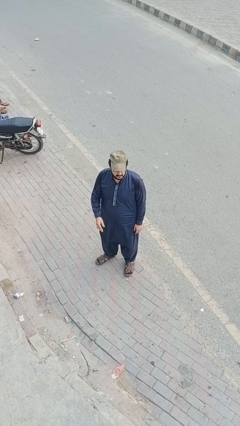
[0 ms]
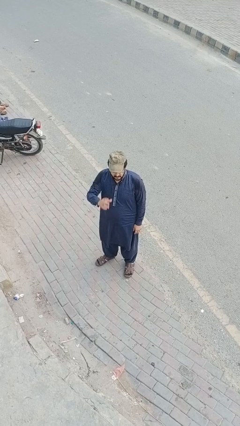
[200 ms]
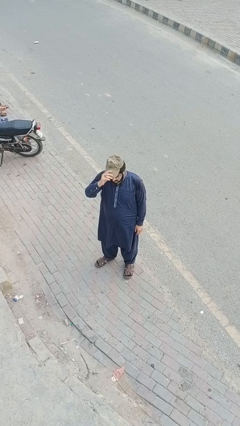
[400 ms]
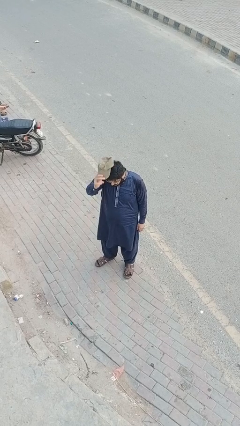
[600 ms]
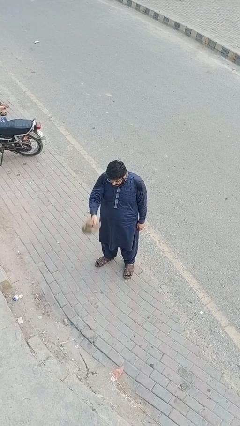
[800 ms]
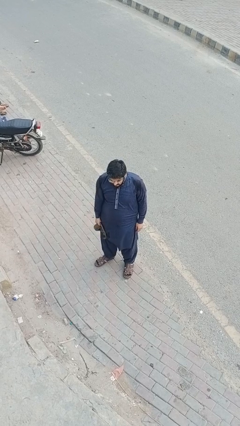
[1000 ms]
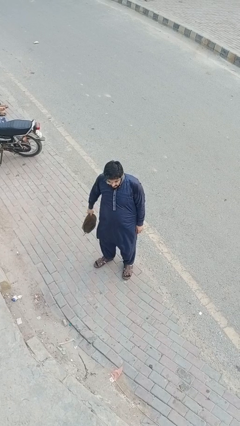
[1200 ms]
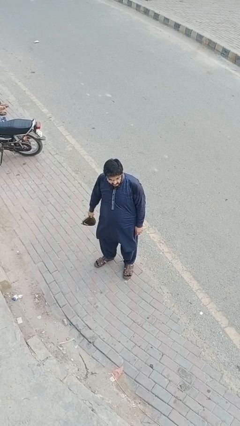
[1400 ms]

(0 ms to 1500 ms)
person takes off hat

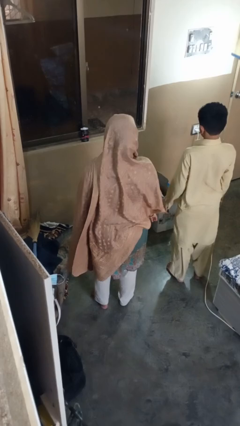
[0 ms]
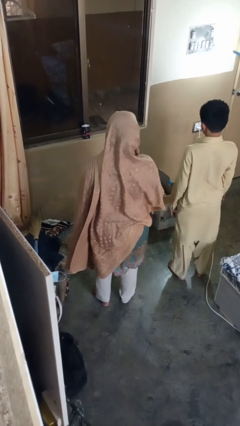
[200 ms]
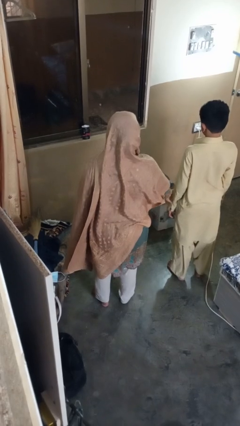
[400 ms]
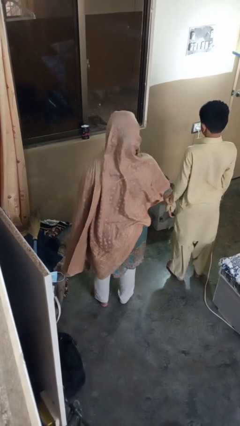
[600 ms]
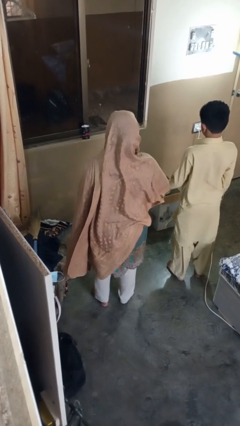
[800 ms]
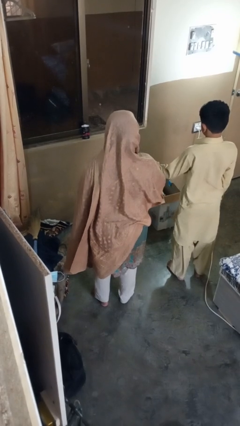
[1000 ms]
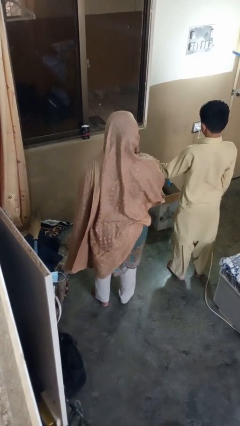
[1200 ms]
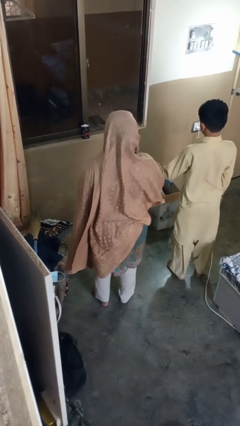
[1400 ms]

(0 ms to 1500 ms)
person grabs person by forearm

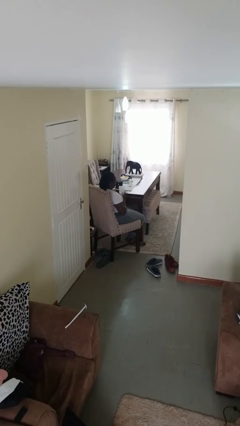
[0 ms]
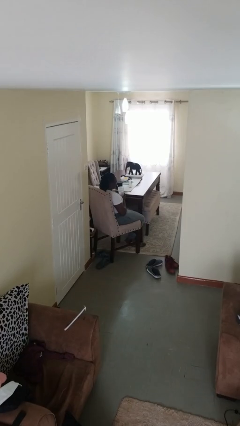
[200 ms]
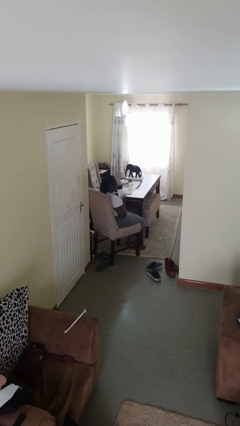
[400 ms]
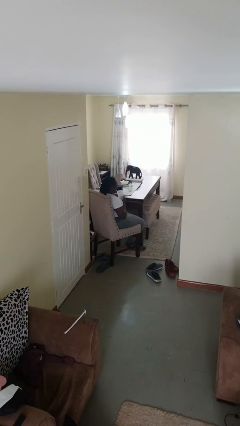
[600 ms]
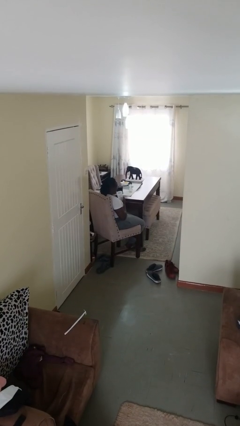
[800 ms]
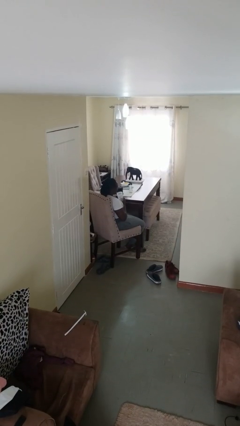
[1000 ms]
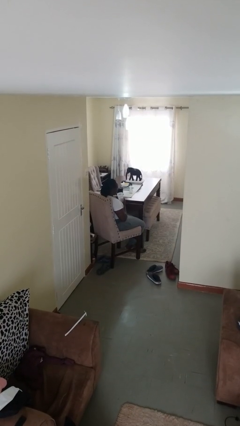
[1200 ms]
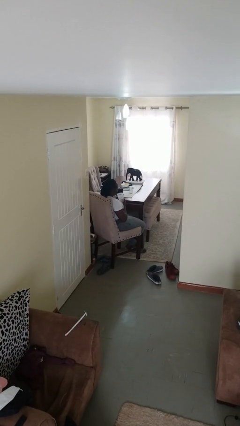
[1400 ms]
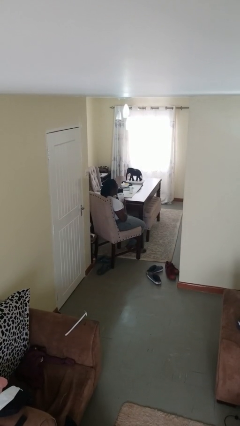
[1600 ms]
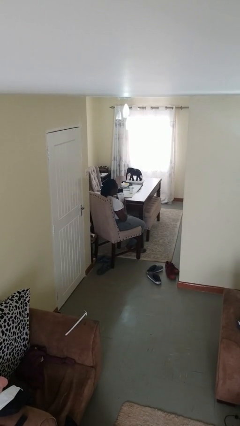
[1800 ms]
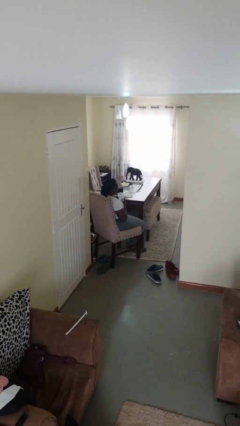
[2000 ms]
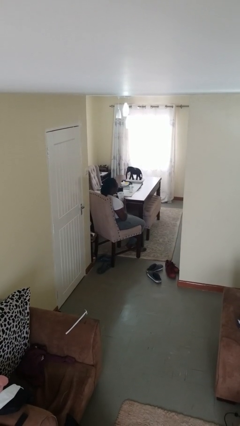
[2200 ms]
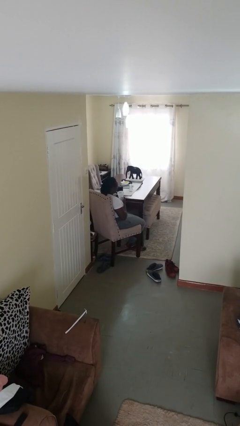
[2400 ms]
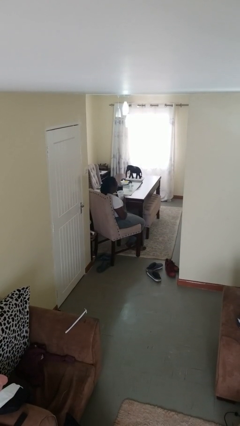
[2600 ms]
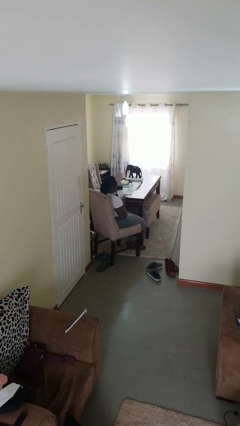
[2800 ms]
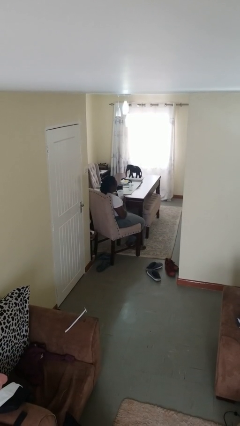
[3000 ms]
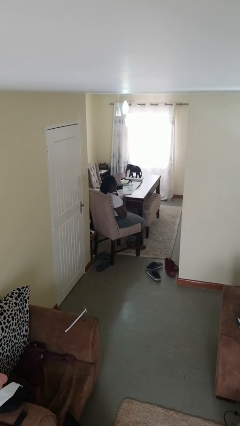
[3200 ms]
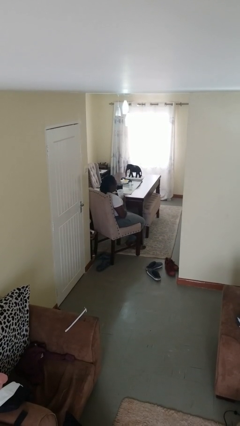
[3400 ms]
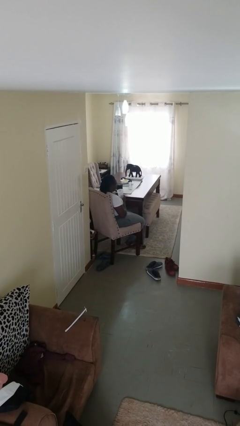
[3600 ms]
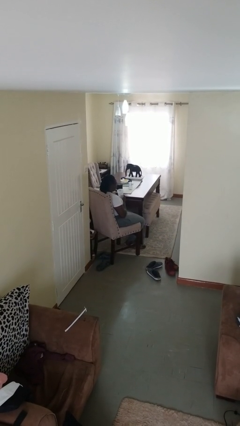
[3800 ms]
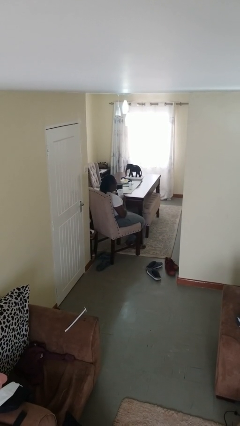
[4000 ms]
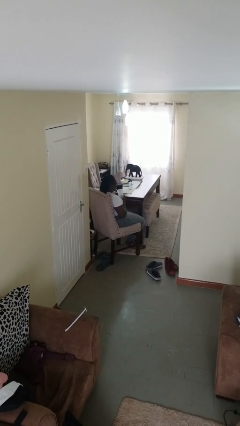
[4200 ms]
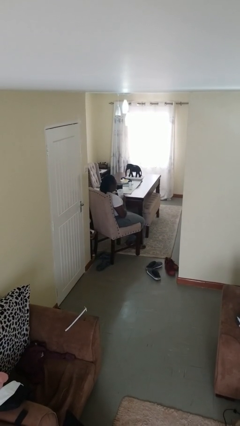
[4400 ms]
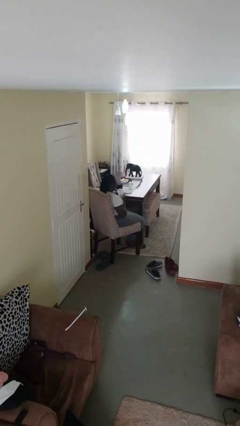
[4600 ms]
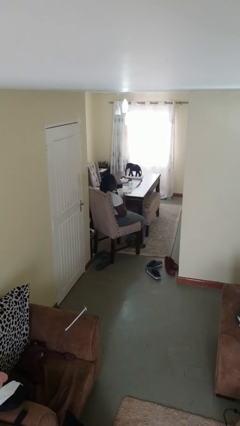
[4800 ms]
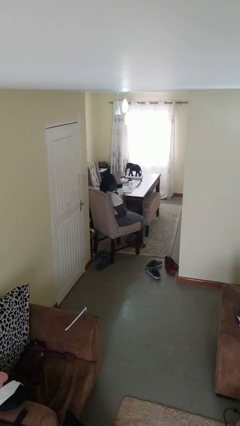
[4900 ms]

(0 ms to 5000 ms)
person drinks from straw

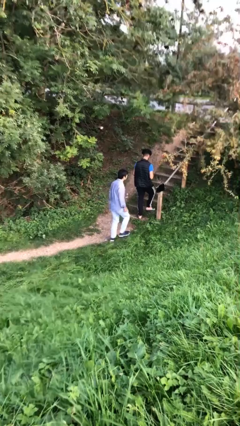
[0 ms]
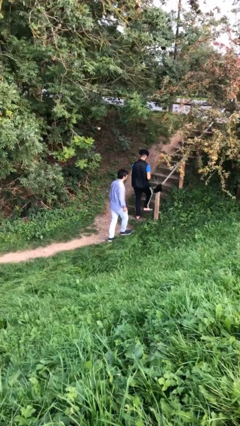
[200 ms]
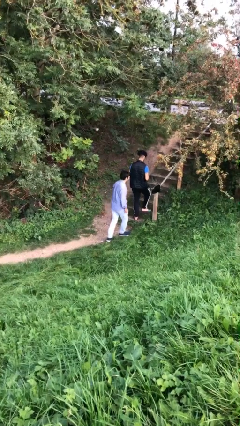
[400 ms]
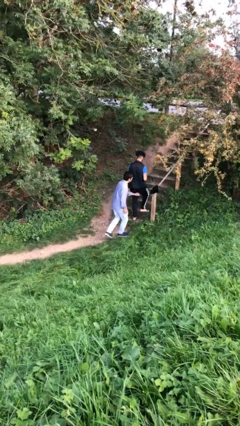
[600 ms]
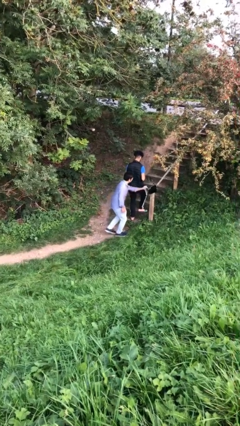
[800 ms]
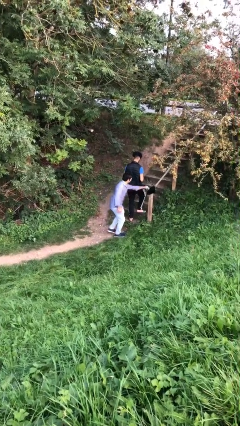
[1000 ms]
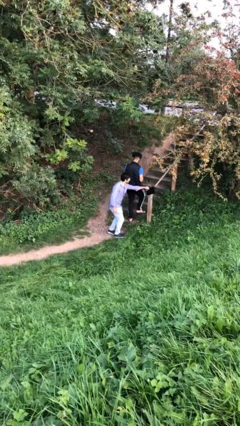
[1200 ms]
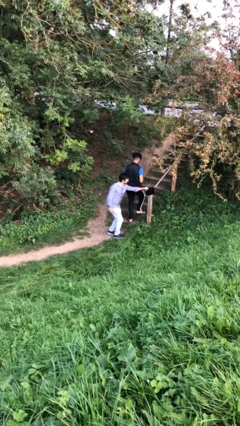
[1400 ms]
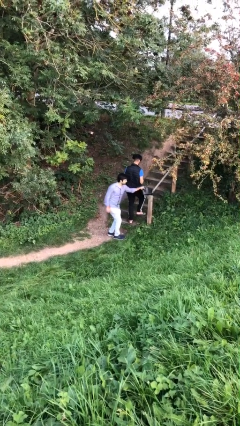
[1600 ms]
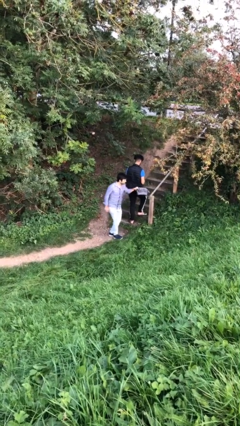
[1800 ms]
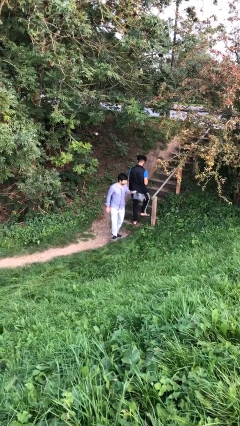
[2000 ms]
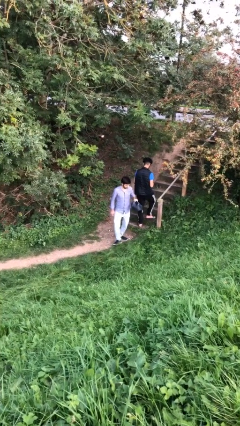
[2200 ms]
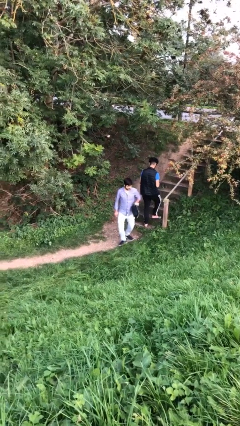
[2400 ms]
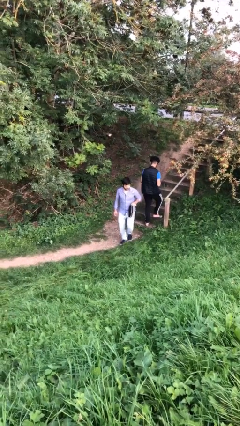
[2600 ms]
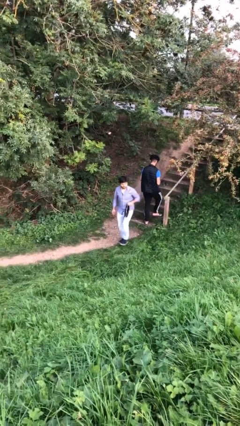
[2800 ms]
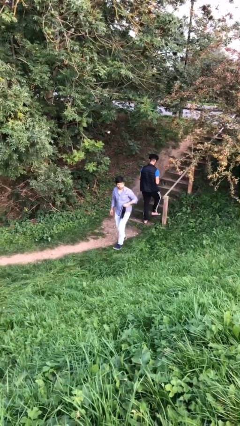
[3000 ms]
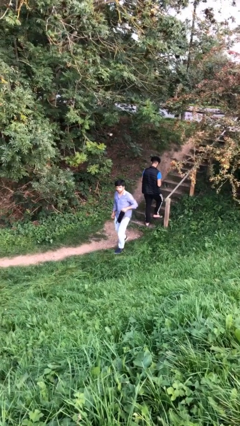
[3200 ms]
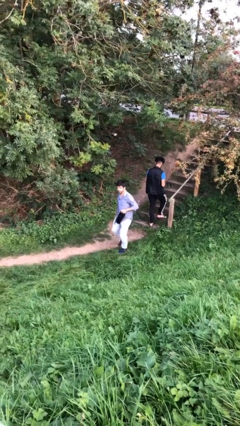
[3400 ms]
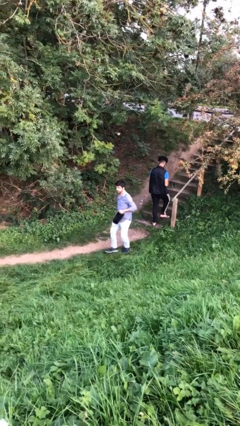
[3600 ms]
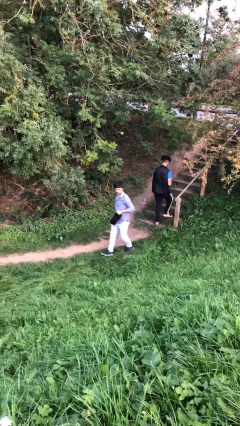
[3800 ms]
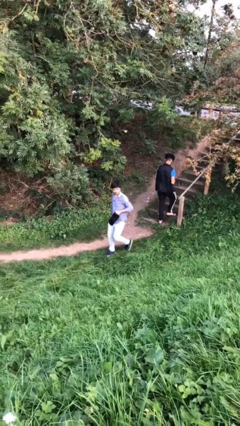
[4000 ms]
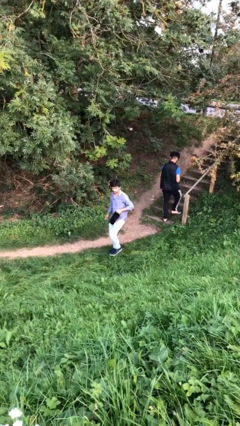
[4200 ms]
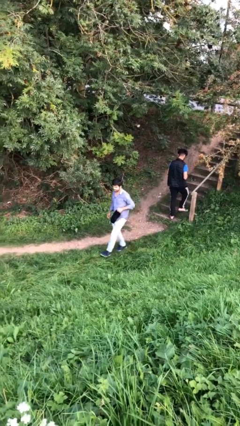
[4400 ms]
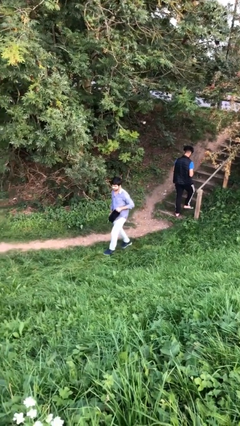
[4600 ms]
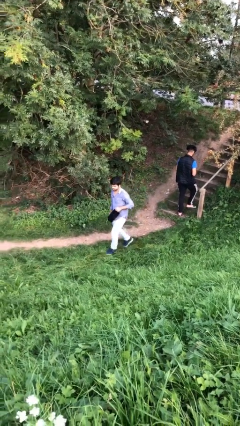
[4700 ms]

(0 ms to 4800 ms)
person steals object from person

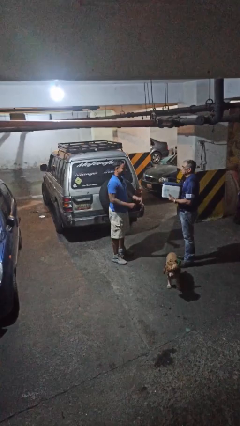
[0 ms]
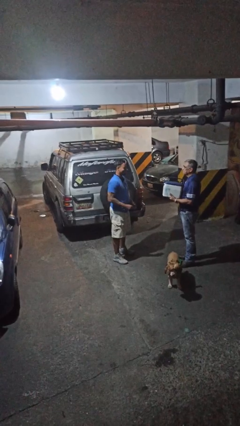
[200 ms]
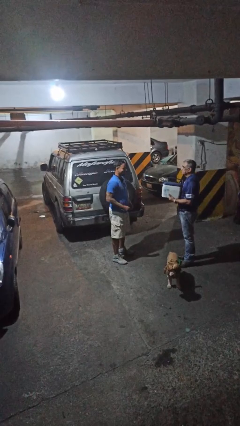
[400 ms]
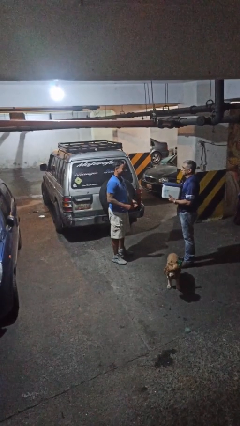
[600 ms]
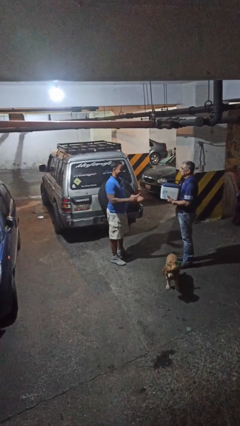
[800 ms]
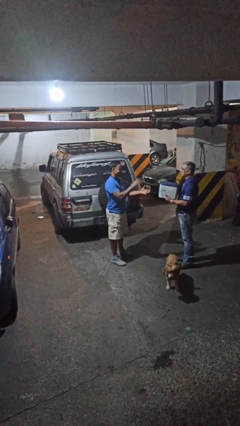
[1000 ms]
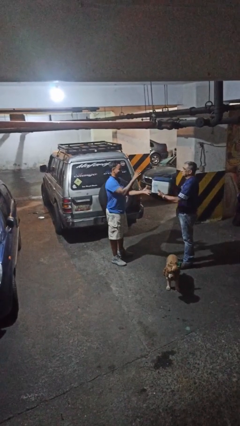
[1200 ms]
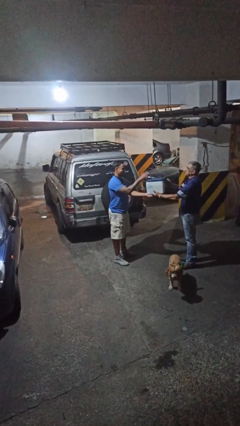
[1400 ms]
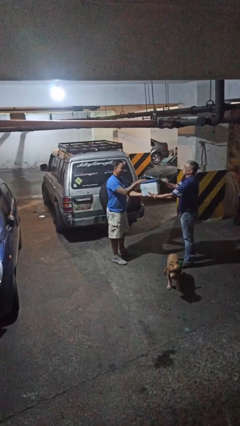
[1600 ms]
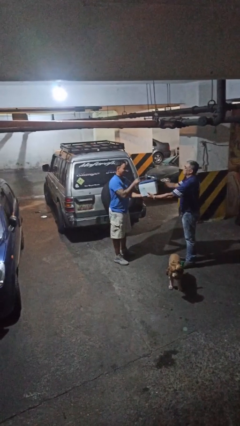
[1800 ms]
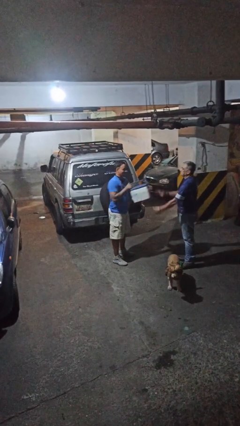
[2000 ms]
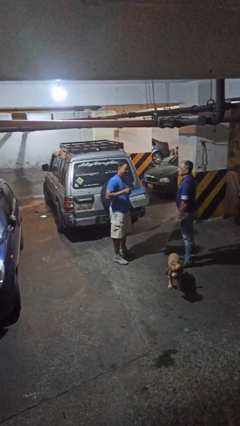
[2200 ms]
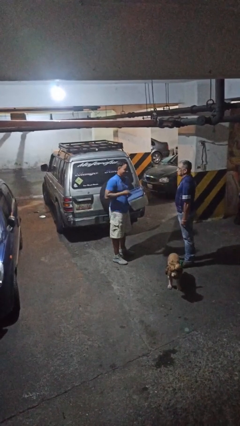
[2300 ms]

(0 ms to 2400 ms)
person transfers object to person

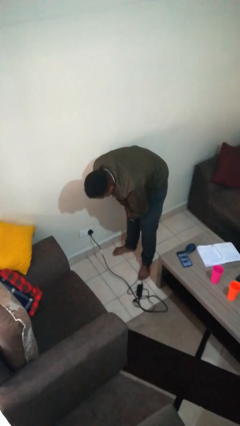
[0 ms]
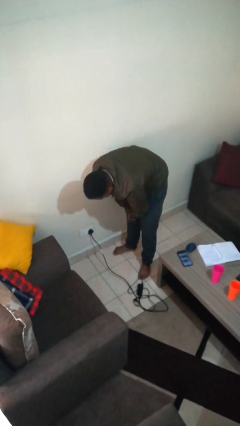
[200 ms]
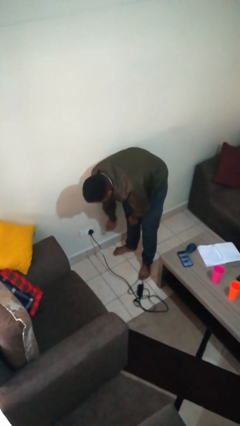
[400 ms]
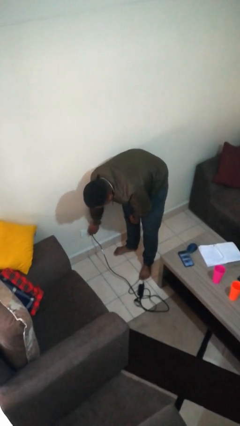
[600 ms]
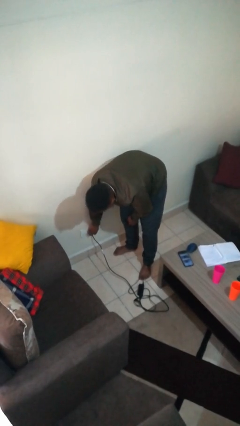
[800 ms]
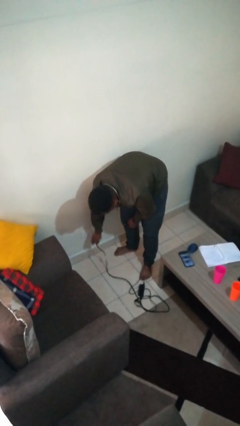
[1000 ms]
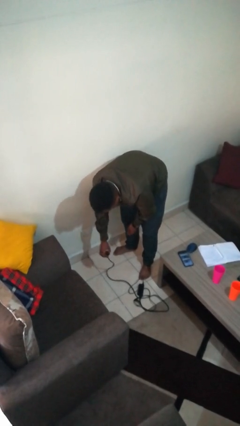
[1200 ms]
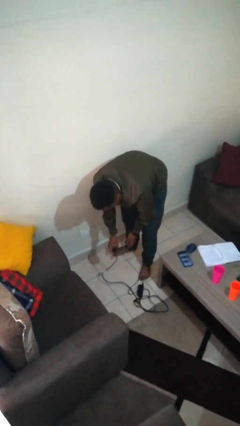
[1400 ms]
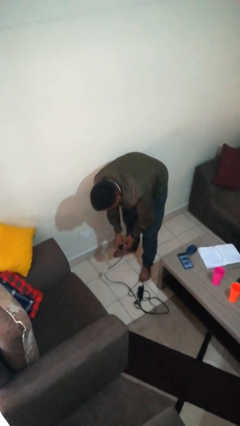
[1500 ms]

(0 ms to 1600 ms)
person unplugs from electrical socket

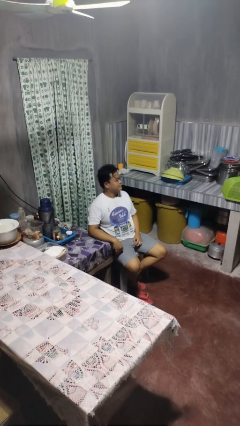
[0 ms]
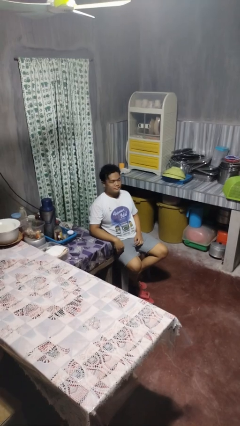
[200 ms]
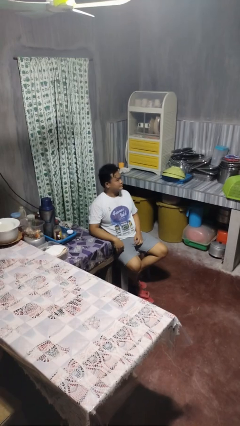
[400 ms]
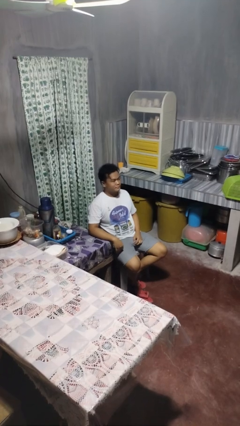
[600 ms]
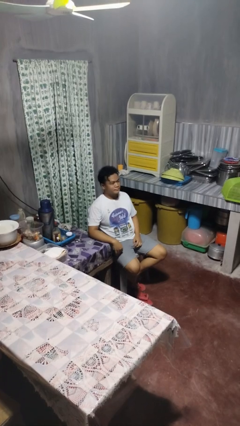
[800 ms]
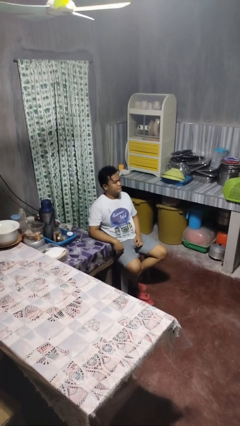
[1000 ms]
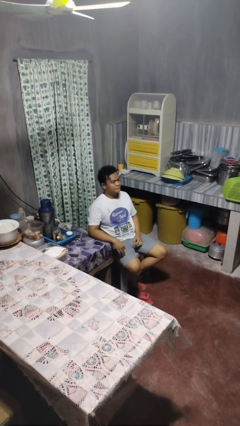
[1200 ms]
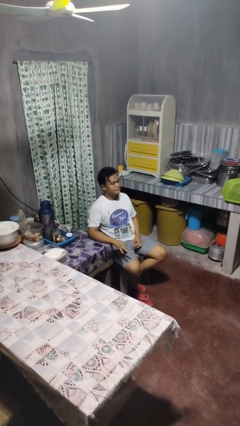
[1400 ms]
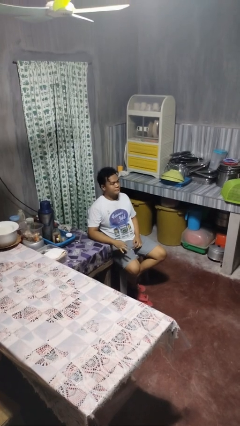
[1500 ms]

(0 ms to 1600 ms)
person shakes head
